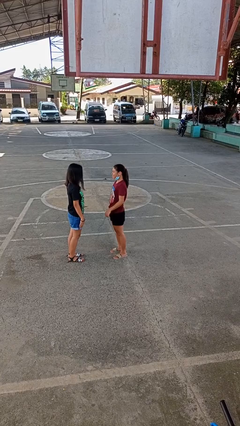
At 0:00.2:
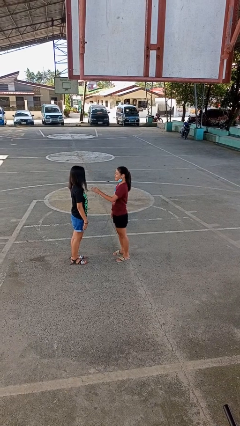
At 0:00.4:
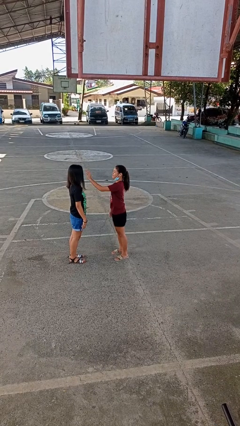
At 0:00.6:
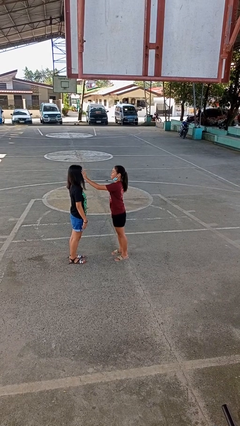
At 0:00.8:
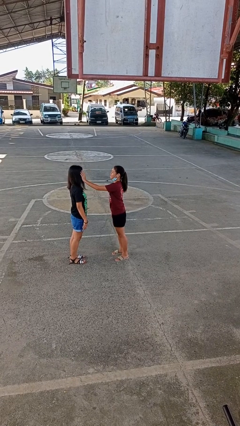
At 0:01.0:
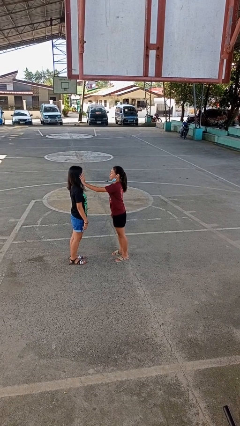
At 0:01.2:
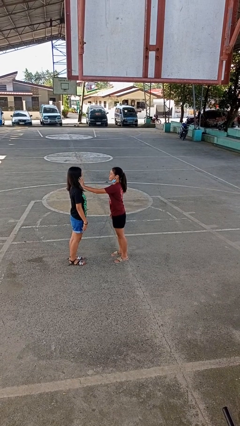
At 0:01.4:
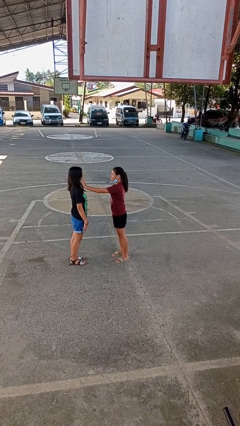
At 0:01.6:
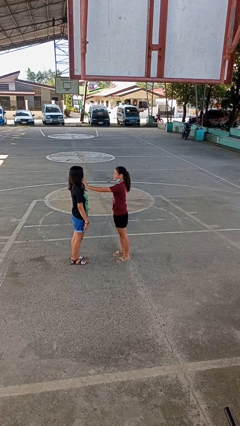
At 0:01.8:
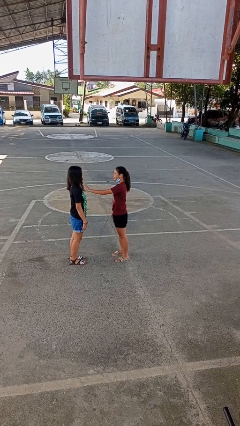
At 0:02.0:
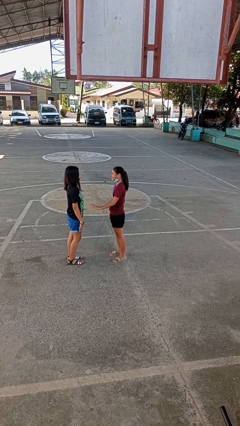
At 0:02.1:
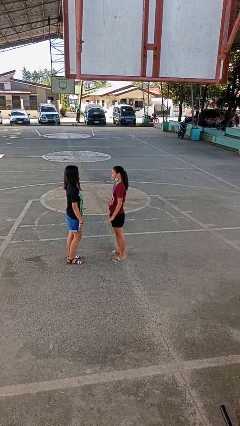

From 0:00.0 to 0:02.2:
person touches face of person

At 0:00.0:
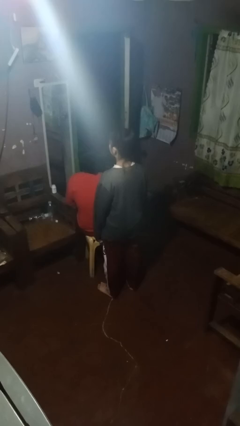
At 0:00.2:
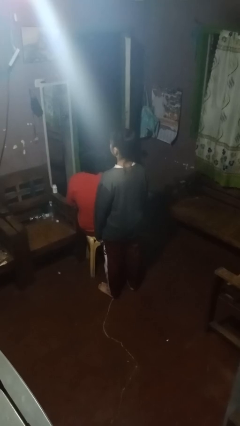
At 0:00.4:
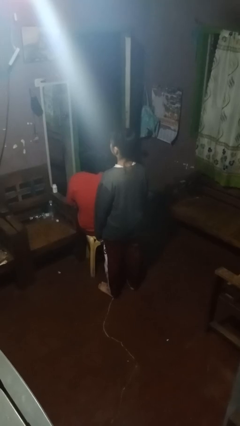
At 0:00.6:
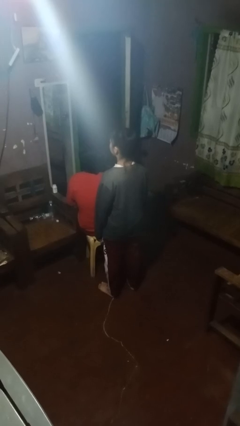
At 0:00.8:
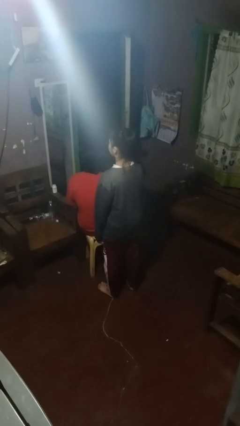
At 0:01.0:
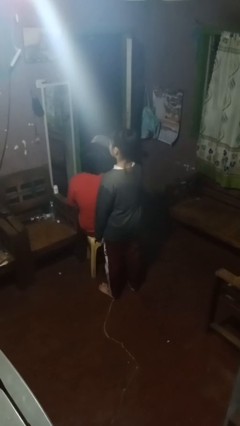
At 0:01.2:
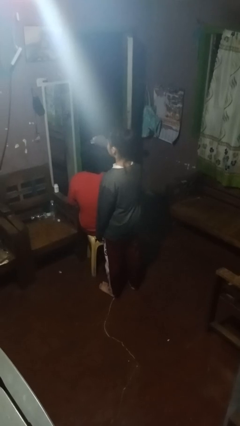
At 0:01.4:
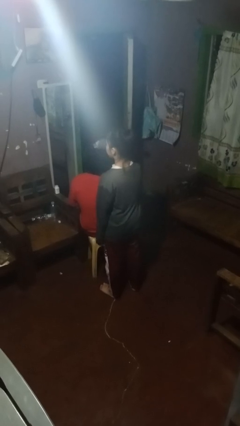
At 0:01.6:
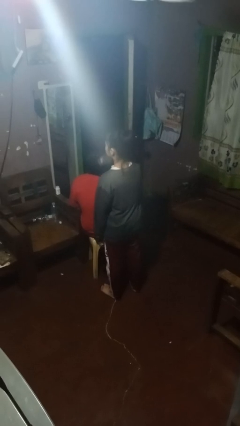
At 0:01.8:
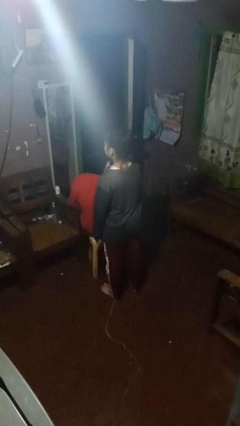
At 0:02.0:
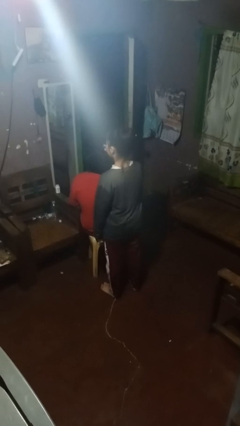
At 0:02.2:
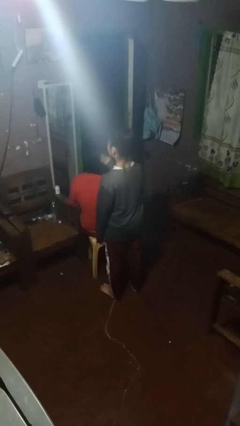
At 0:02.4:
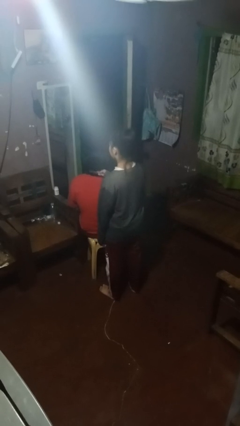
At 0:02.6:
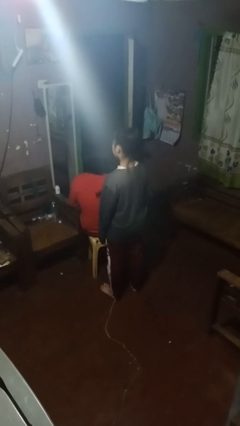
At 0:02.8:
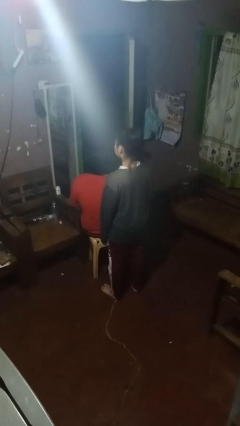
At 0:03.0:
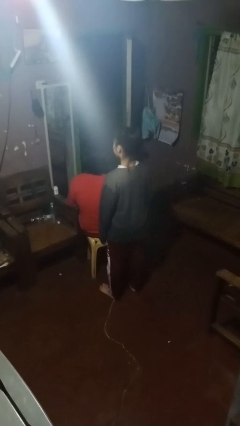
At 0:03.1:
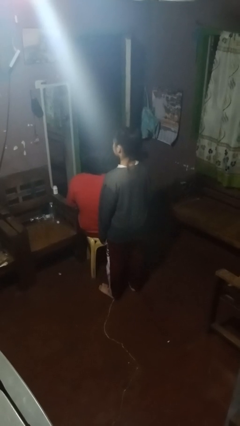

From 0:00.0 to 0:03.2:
person brushes hair of person

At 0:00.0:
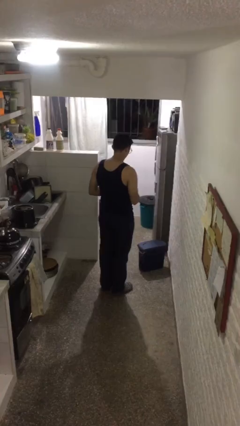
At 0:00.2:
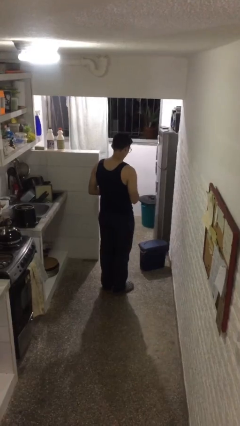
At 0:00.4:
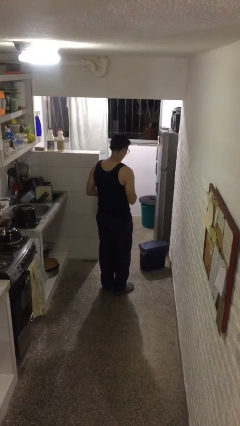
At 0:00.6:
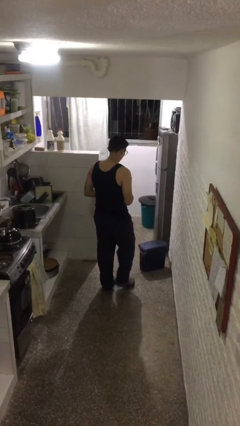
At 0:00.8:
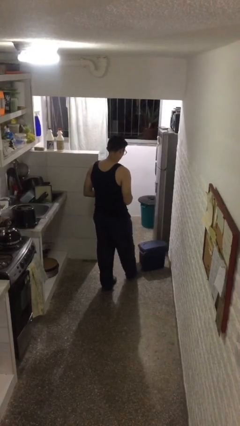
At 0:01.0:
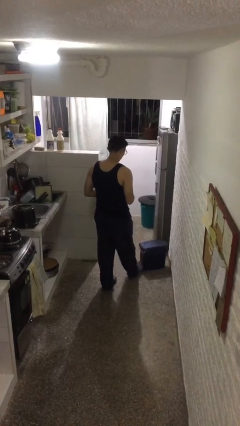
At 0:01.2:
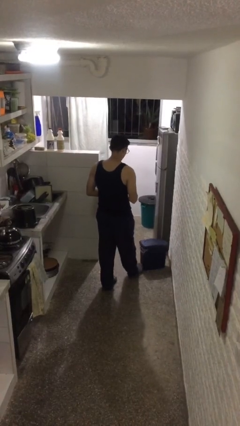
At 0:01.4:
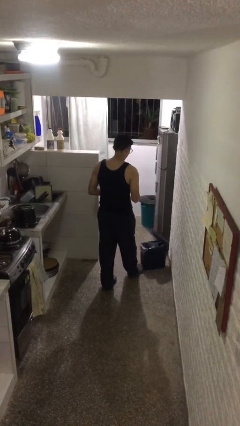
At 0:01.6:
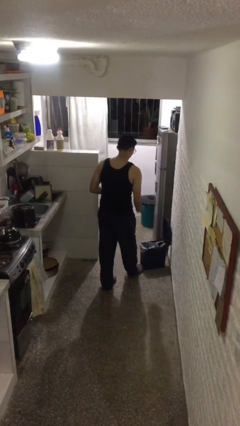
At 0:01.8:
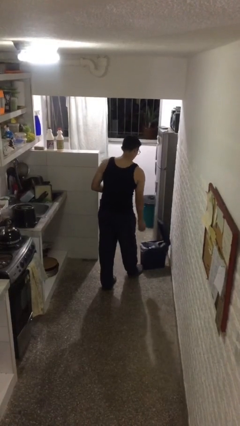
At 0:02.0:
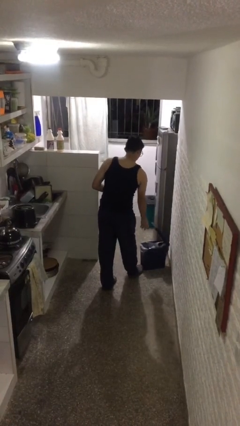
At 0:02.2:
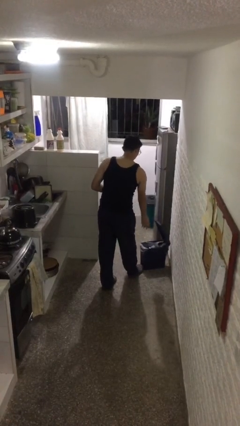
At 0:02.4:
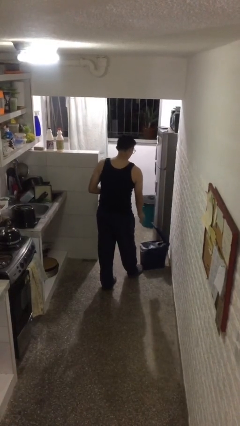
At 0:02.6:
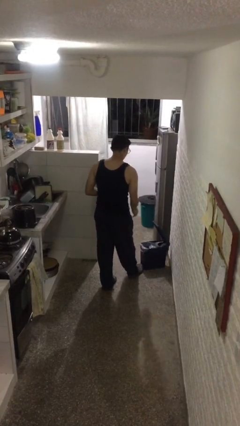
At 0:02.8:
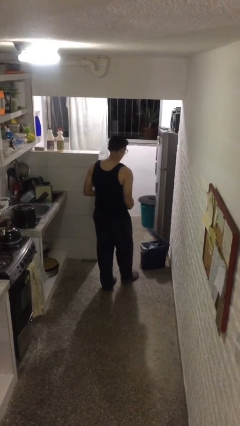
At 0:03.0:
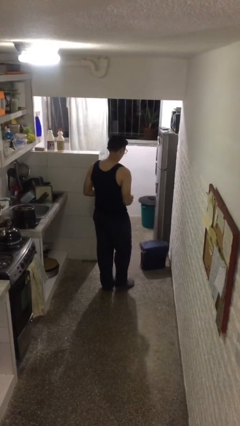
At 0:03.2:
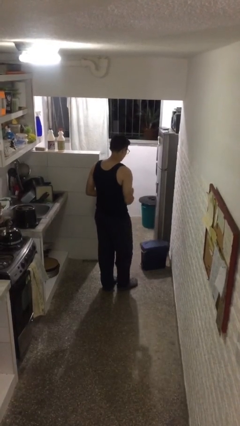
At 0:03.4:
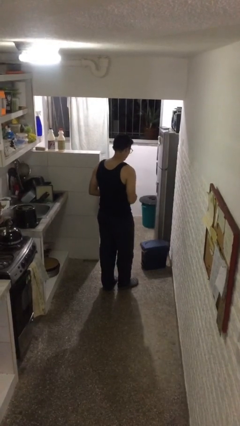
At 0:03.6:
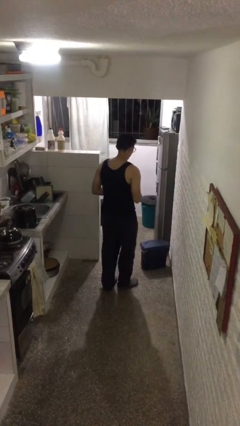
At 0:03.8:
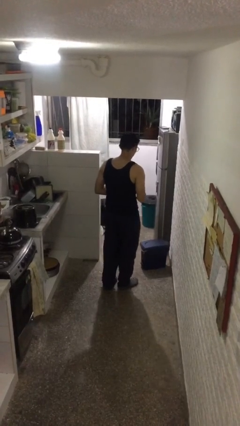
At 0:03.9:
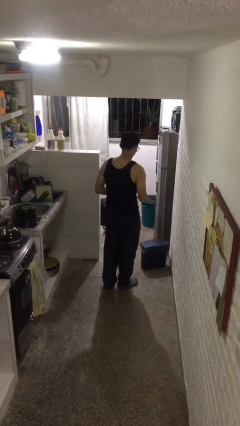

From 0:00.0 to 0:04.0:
person discards trash

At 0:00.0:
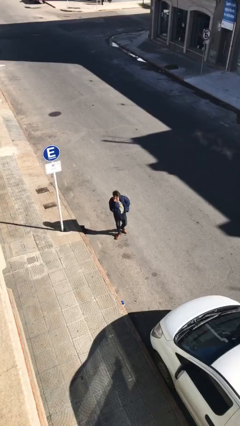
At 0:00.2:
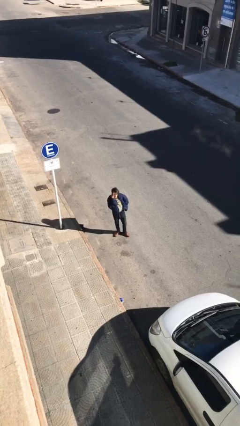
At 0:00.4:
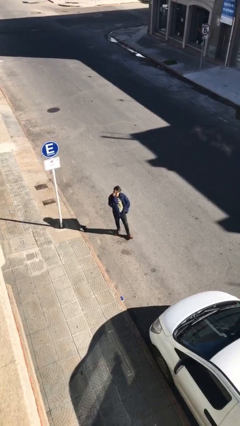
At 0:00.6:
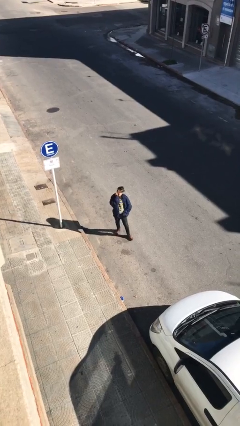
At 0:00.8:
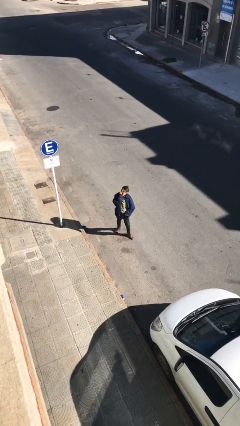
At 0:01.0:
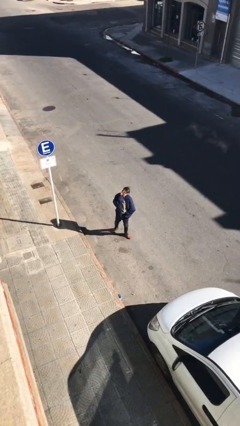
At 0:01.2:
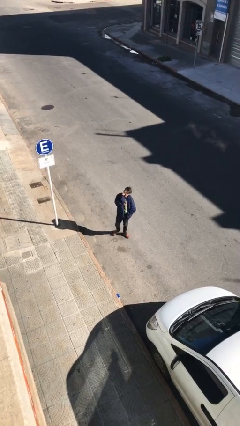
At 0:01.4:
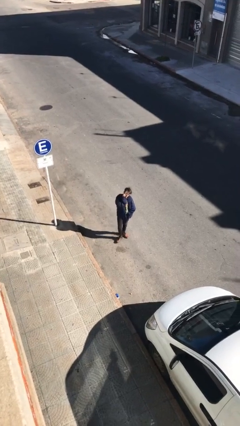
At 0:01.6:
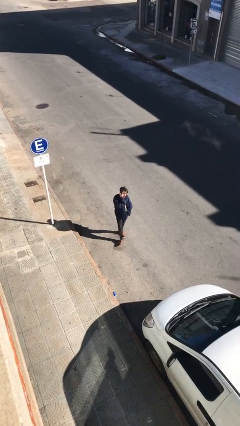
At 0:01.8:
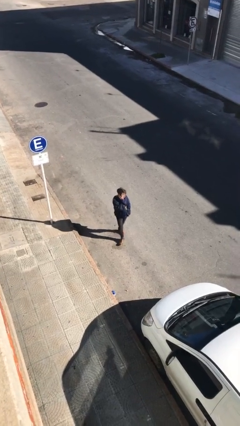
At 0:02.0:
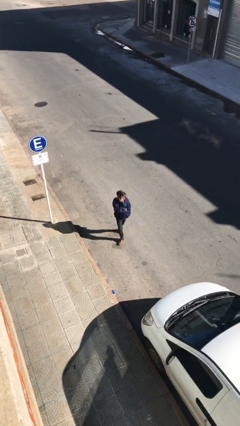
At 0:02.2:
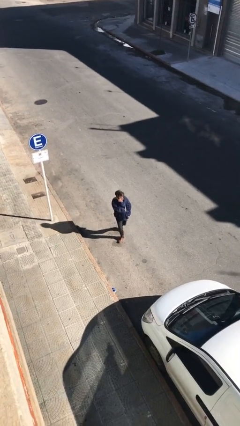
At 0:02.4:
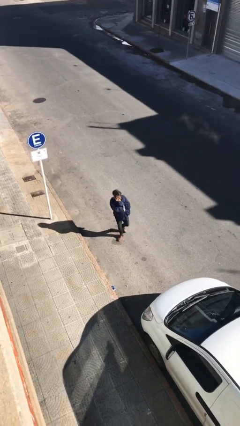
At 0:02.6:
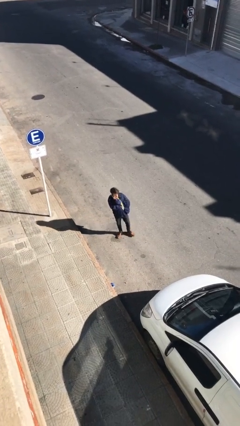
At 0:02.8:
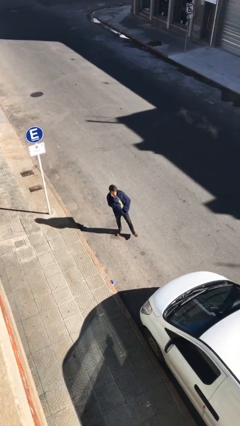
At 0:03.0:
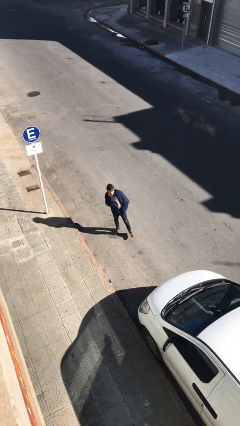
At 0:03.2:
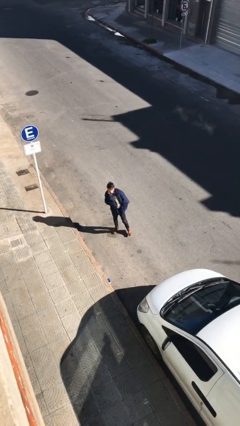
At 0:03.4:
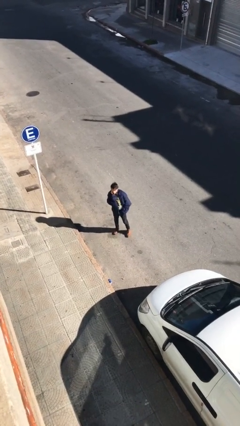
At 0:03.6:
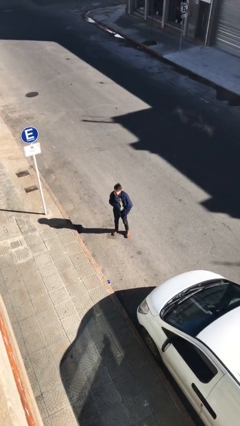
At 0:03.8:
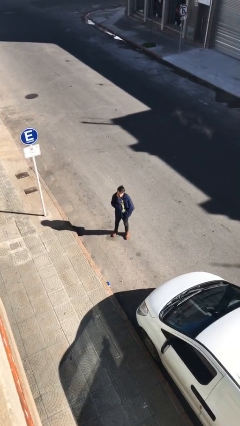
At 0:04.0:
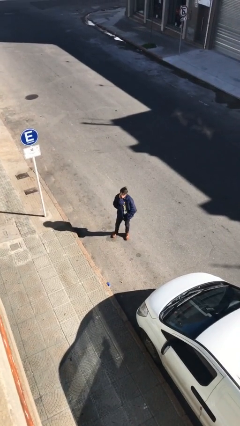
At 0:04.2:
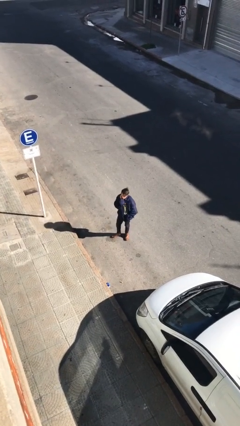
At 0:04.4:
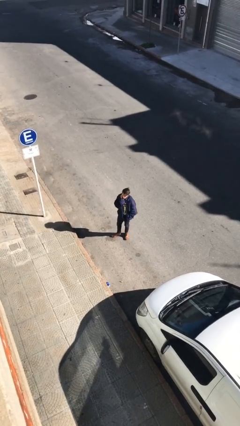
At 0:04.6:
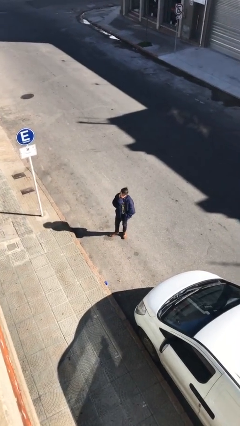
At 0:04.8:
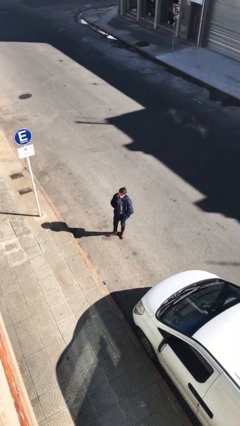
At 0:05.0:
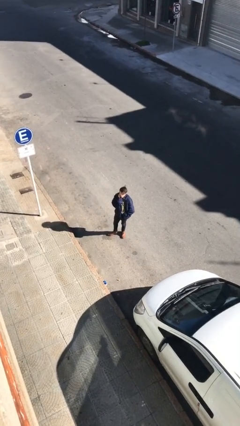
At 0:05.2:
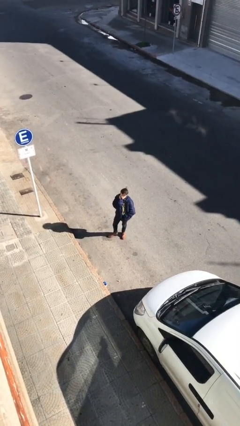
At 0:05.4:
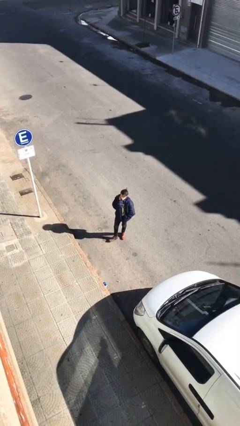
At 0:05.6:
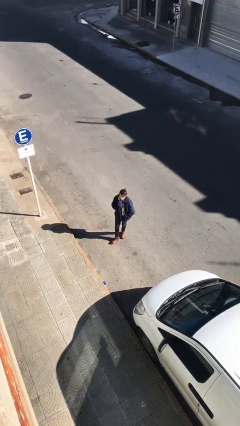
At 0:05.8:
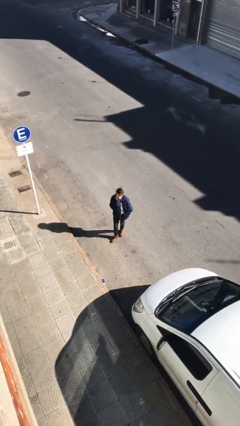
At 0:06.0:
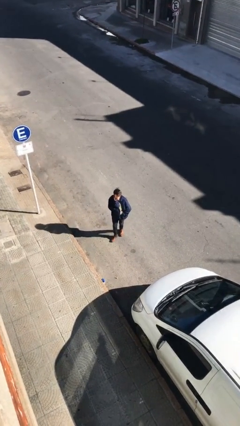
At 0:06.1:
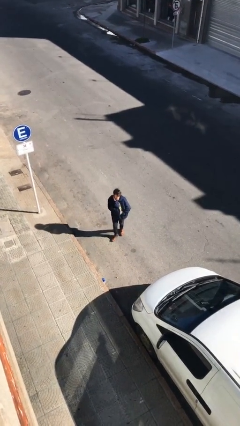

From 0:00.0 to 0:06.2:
person talks on phone

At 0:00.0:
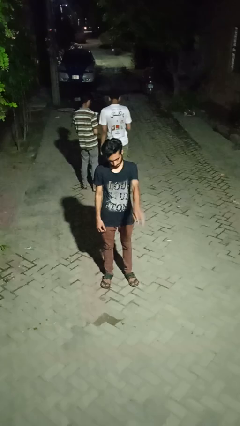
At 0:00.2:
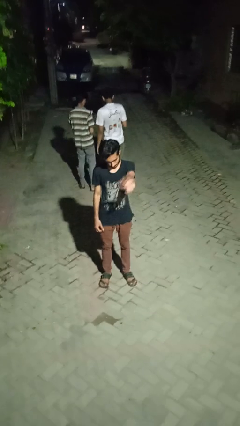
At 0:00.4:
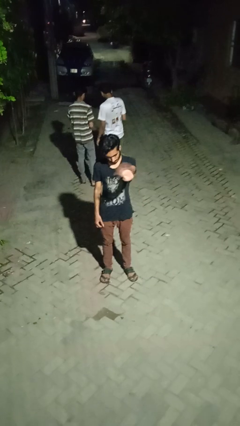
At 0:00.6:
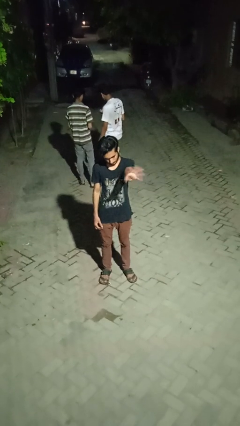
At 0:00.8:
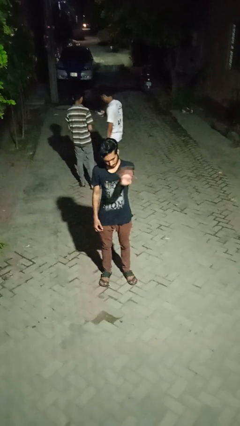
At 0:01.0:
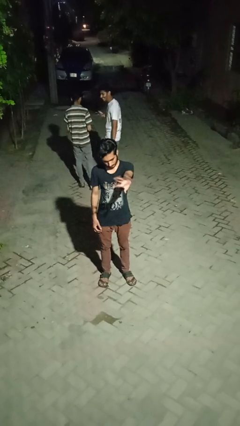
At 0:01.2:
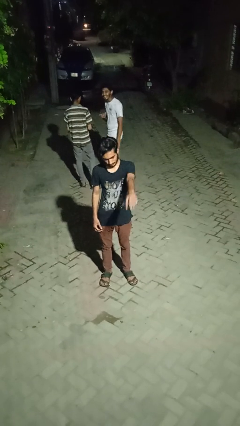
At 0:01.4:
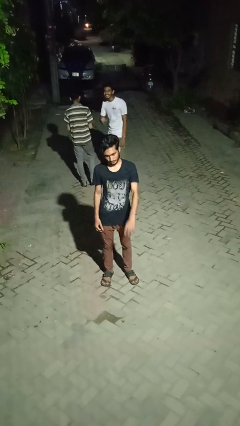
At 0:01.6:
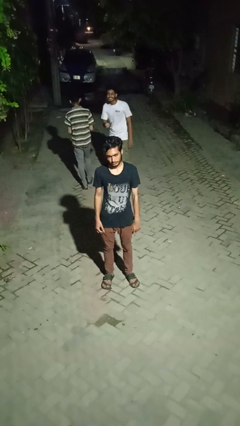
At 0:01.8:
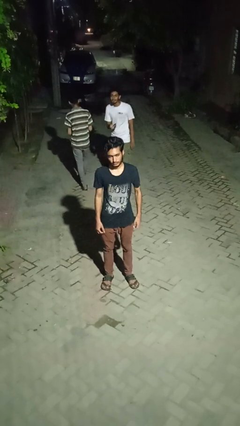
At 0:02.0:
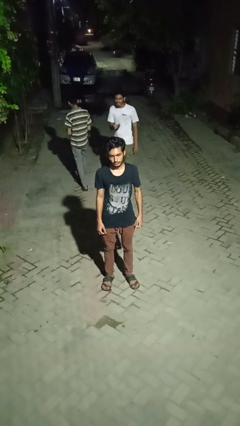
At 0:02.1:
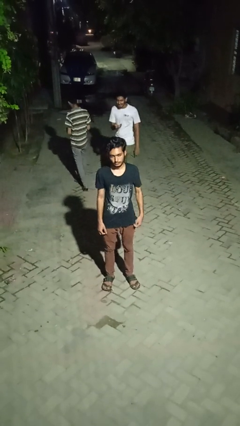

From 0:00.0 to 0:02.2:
person waves at person
